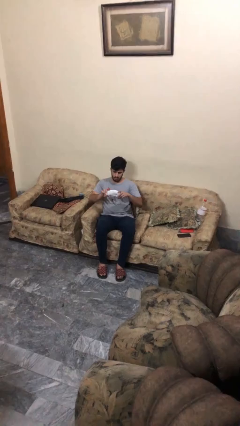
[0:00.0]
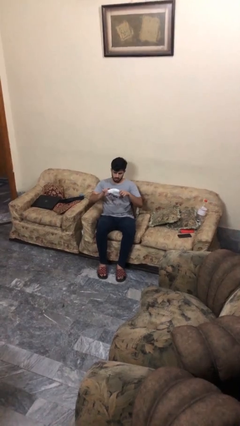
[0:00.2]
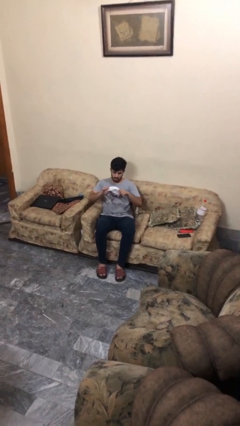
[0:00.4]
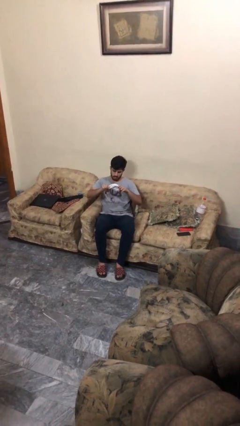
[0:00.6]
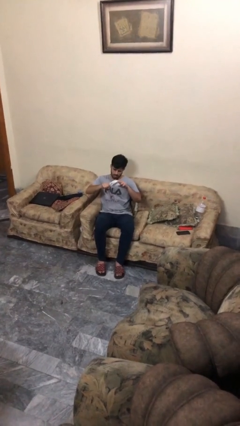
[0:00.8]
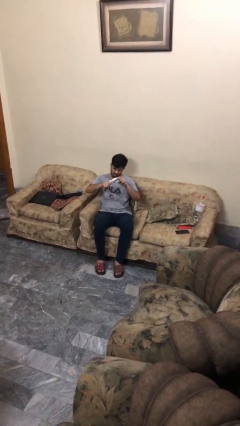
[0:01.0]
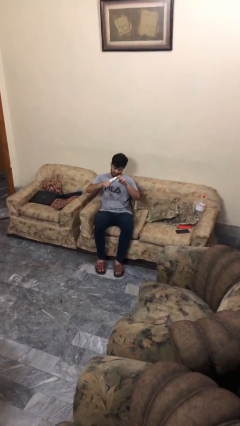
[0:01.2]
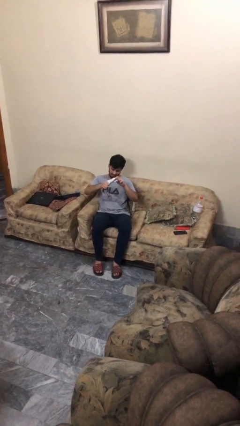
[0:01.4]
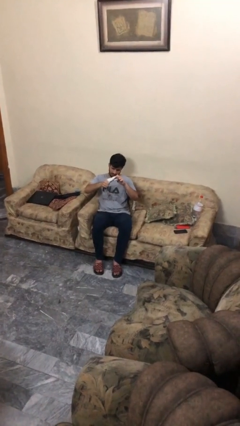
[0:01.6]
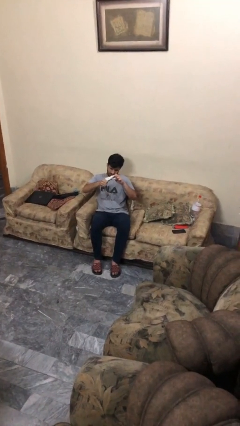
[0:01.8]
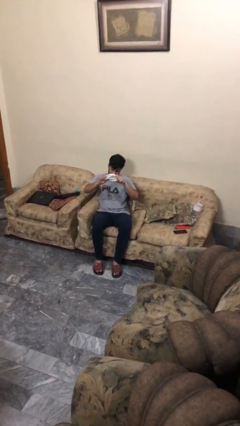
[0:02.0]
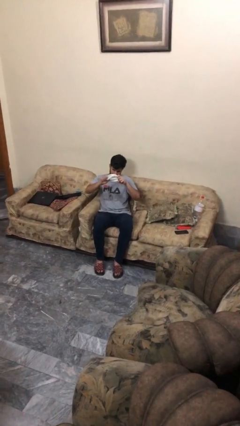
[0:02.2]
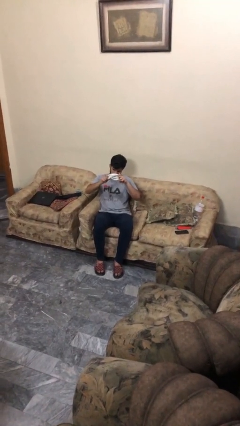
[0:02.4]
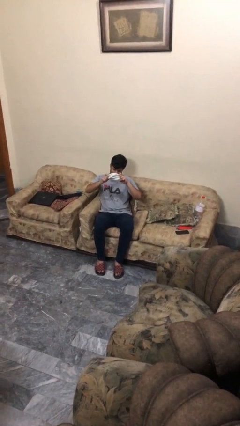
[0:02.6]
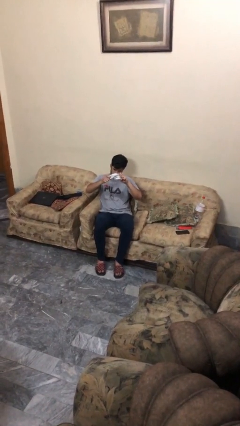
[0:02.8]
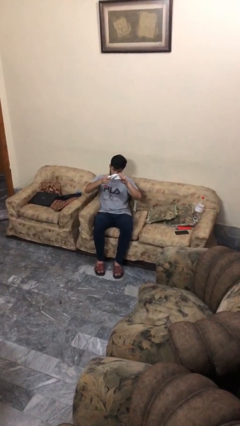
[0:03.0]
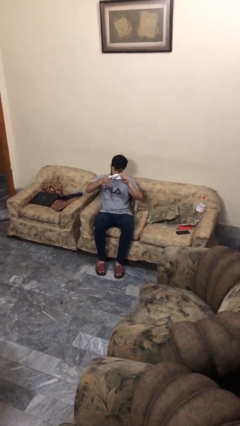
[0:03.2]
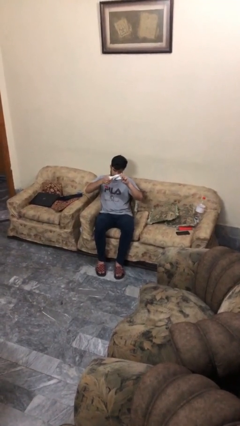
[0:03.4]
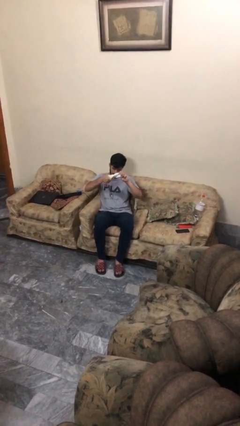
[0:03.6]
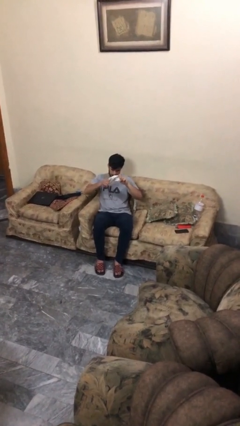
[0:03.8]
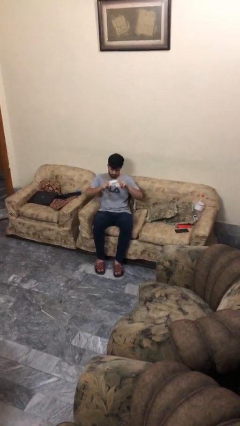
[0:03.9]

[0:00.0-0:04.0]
person squeezes object

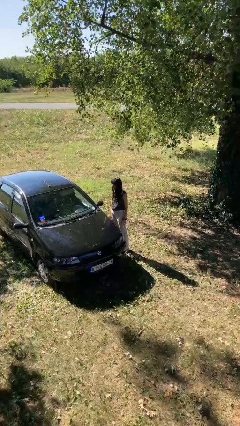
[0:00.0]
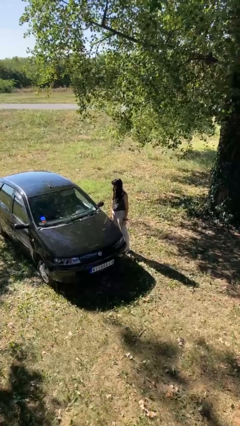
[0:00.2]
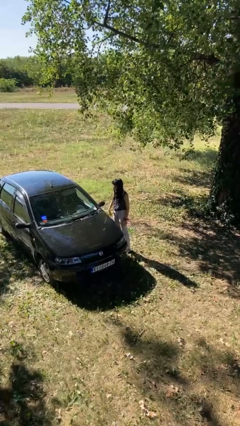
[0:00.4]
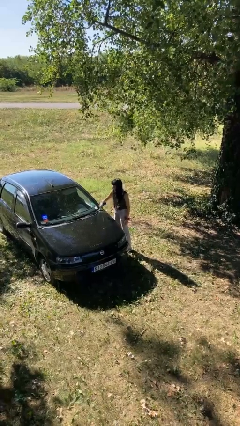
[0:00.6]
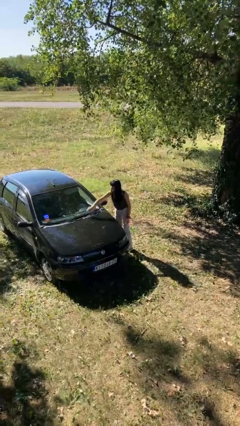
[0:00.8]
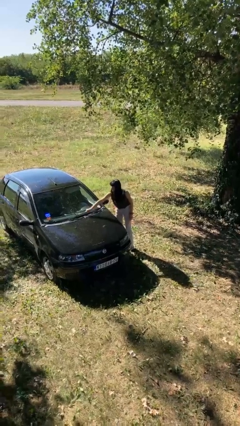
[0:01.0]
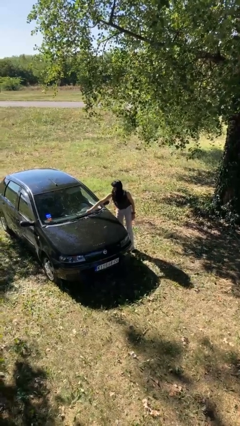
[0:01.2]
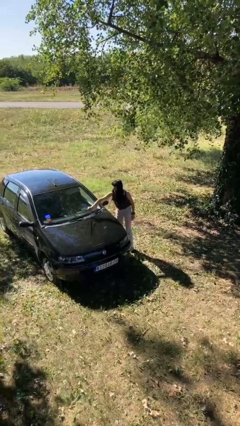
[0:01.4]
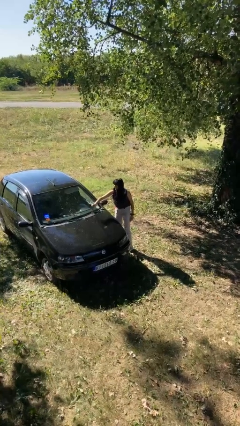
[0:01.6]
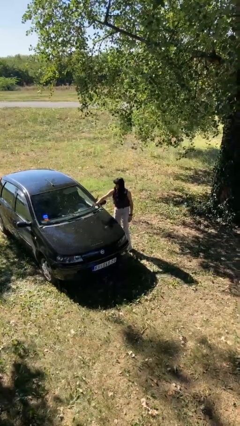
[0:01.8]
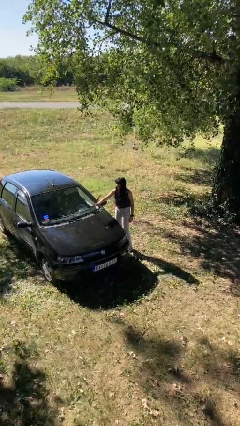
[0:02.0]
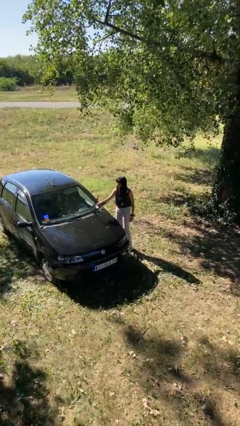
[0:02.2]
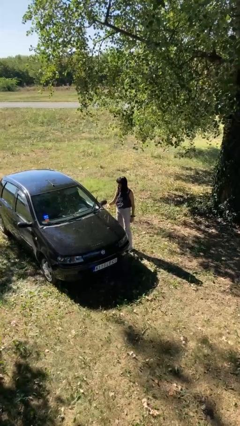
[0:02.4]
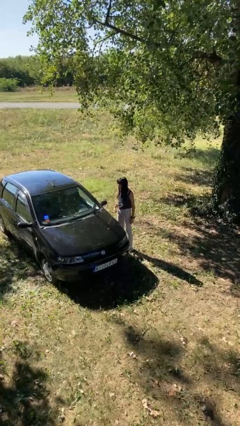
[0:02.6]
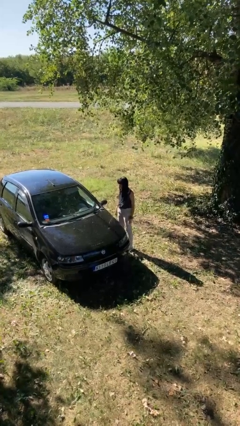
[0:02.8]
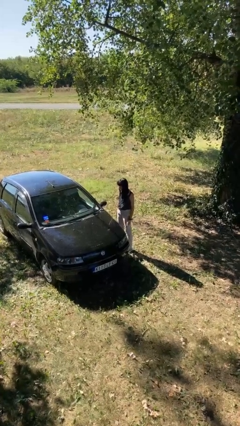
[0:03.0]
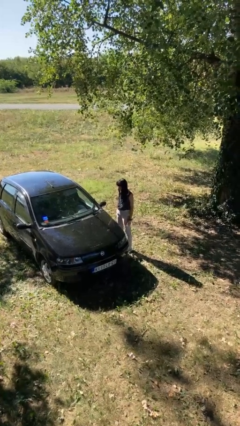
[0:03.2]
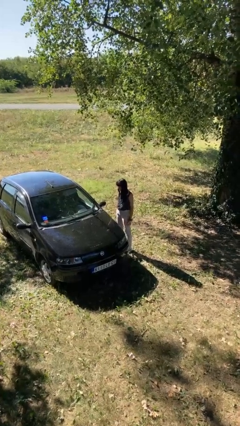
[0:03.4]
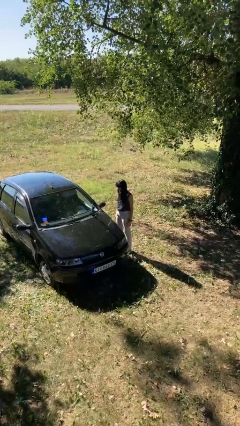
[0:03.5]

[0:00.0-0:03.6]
person flips up car wipers

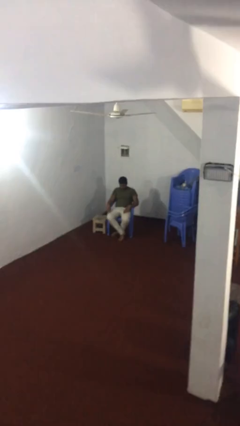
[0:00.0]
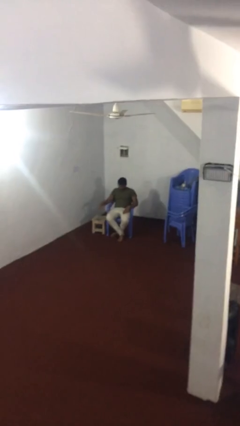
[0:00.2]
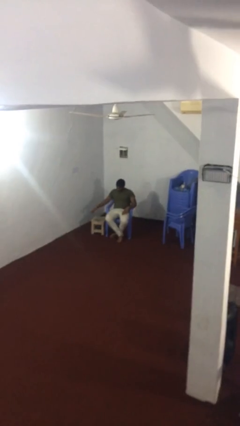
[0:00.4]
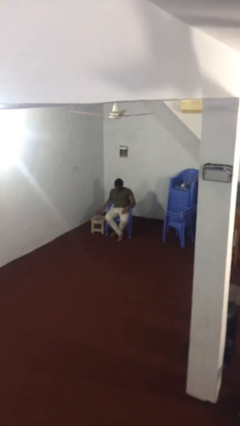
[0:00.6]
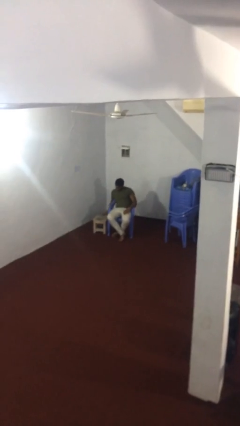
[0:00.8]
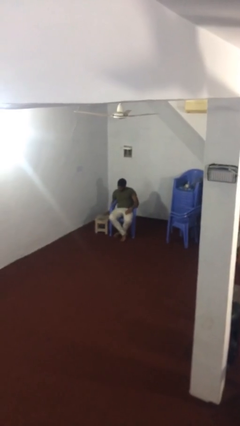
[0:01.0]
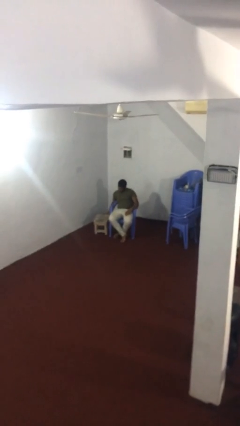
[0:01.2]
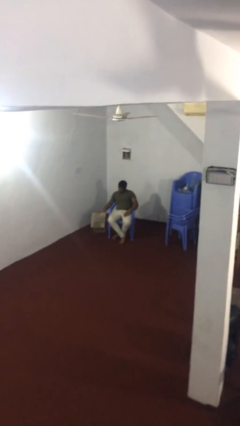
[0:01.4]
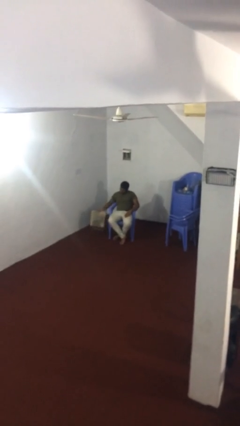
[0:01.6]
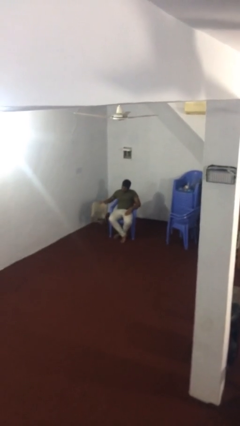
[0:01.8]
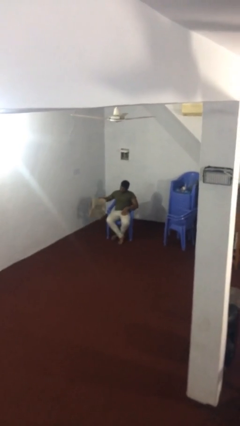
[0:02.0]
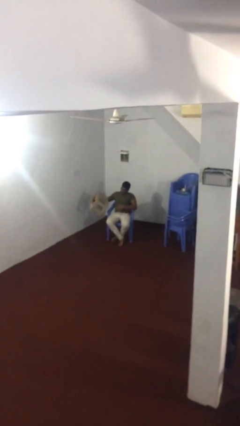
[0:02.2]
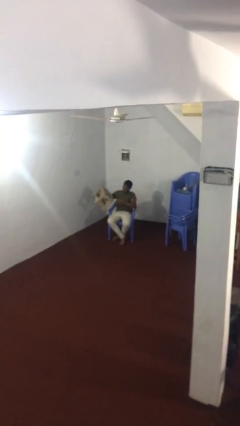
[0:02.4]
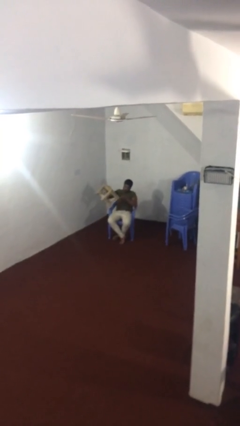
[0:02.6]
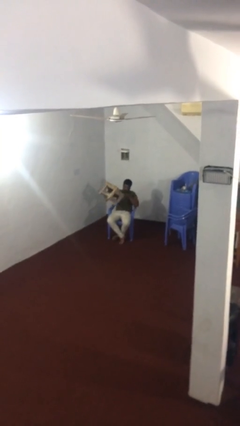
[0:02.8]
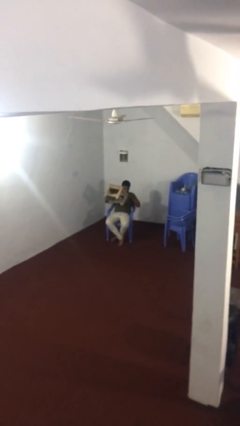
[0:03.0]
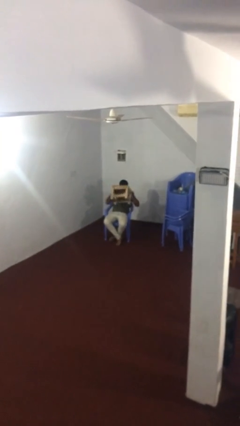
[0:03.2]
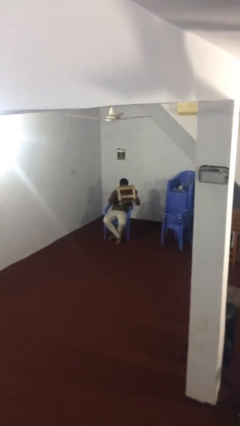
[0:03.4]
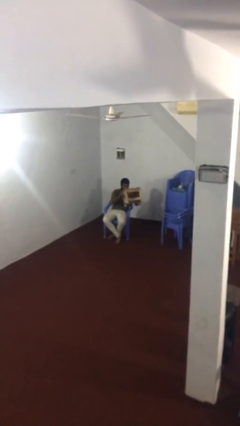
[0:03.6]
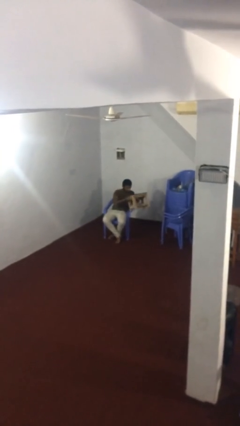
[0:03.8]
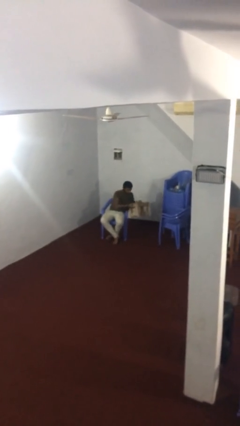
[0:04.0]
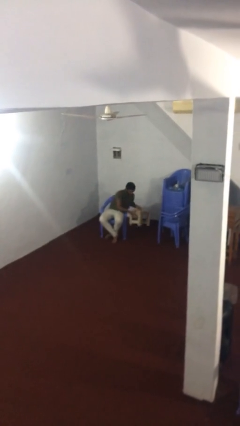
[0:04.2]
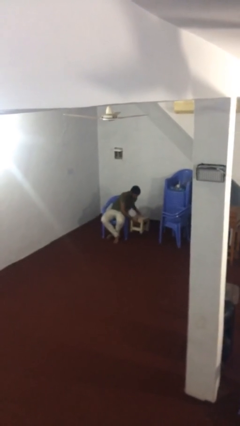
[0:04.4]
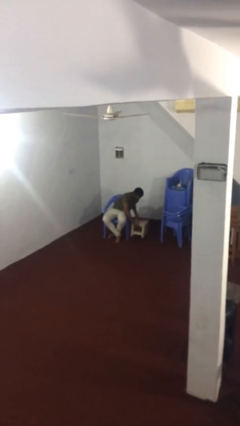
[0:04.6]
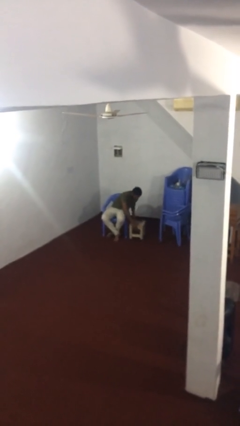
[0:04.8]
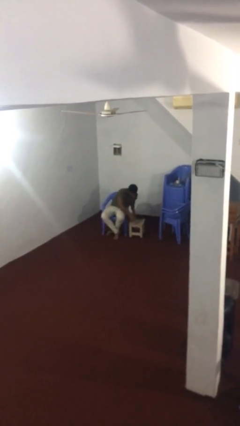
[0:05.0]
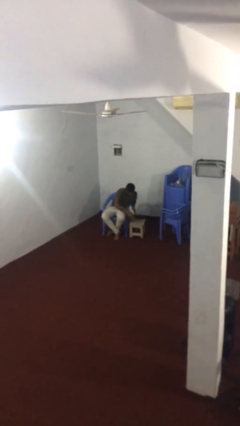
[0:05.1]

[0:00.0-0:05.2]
person picks up object from floor

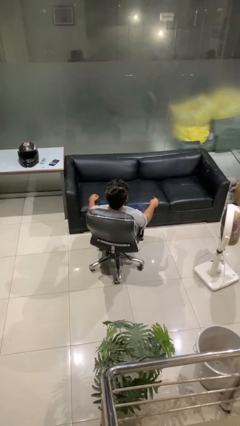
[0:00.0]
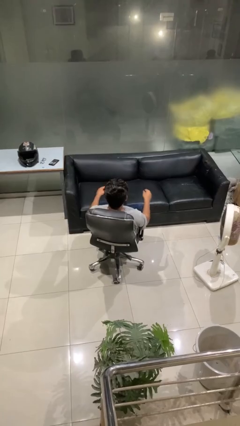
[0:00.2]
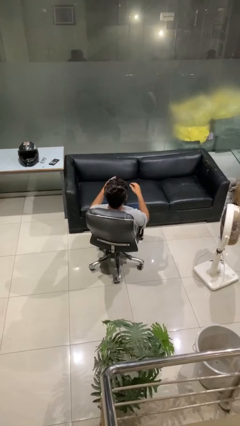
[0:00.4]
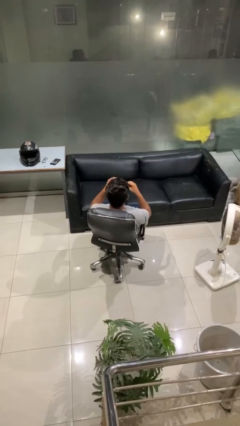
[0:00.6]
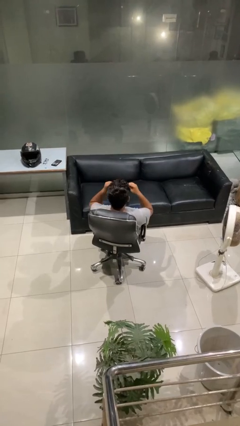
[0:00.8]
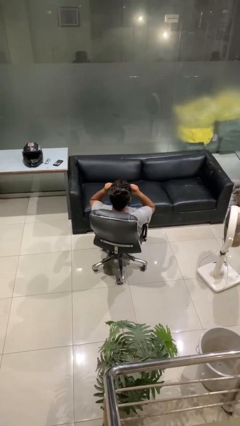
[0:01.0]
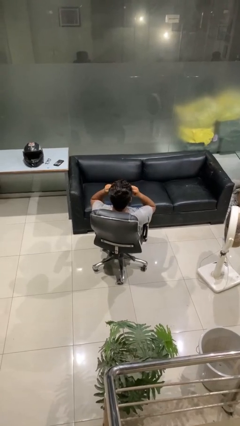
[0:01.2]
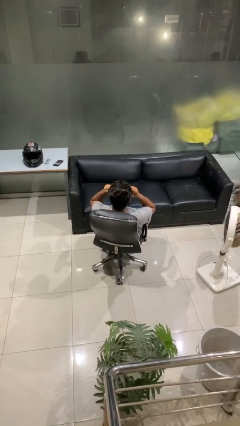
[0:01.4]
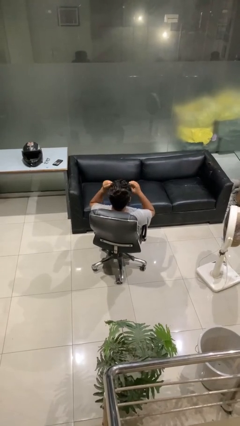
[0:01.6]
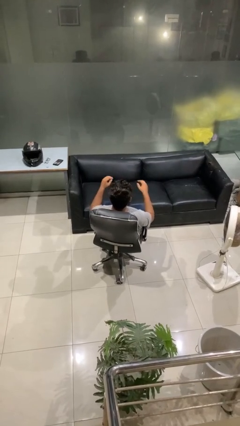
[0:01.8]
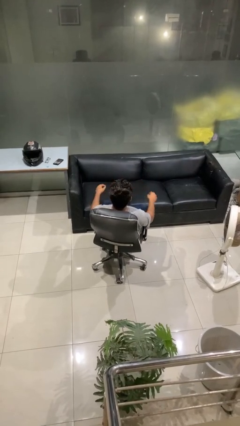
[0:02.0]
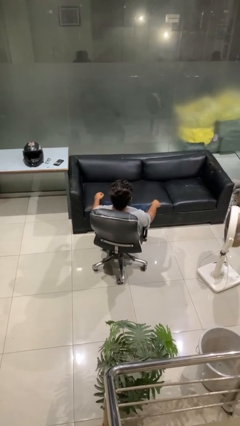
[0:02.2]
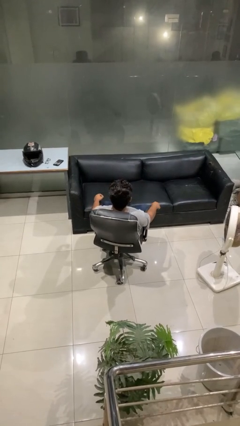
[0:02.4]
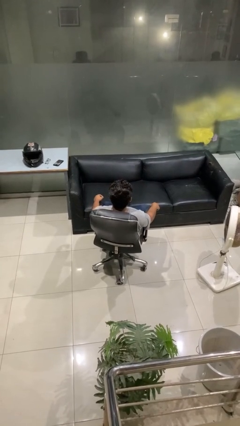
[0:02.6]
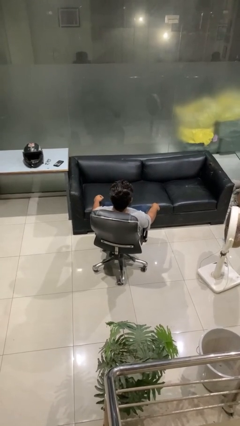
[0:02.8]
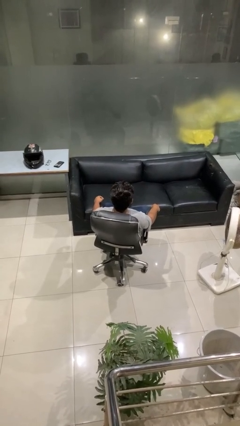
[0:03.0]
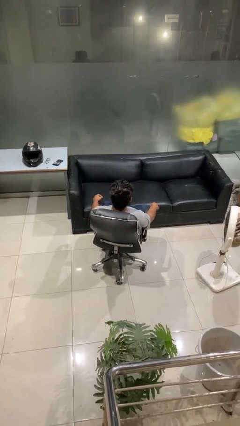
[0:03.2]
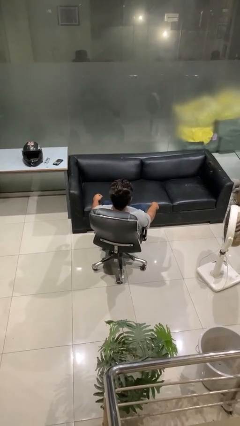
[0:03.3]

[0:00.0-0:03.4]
person puts on sunglasses

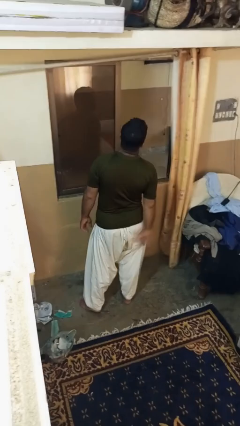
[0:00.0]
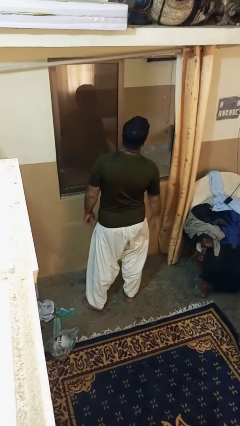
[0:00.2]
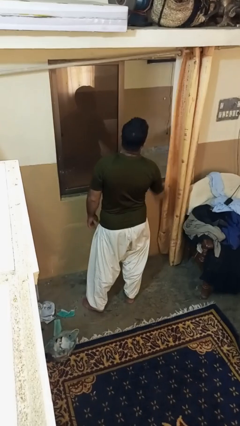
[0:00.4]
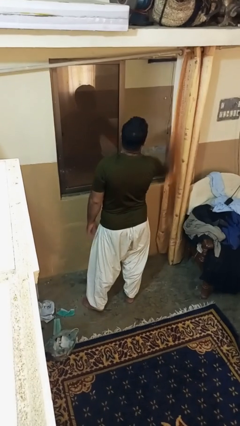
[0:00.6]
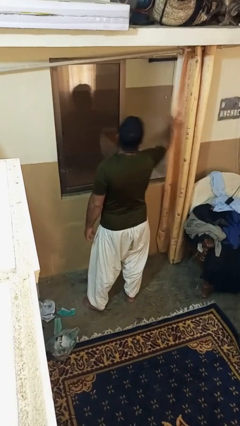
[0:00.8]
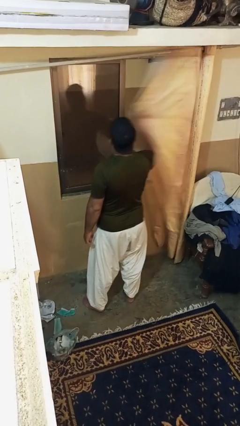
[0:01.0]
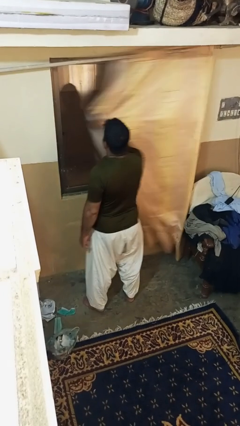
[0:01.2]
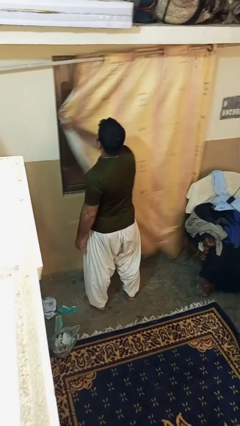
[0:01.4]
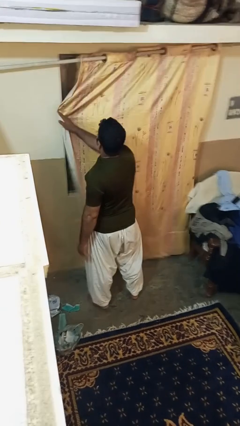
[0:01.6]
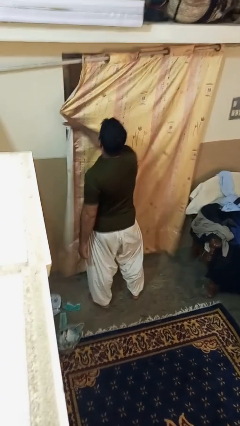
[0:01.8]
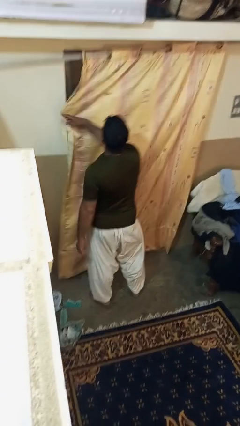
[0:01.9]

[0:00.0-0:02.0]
person closes curtains
